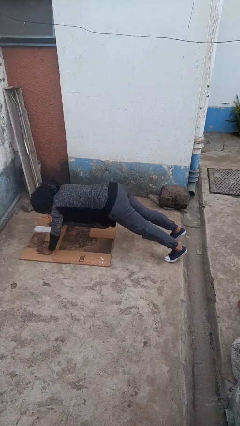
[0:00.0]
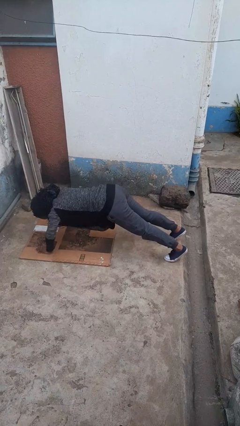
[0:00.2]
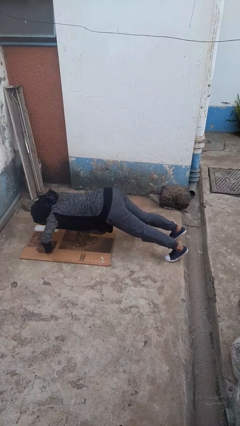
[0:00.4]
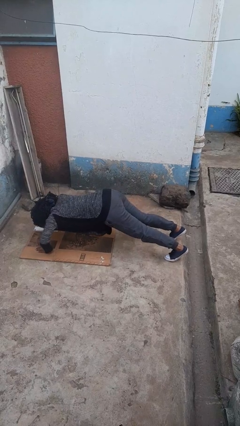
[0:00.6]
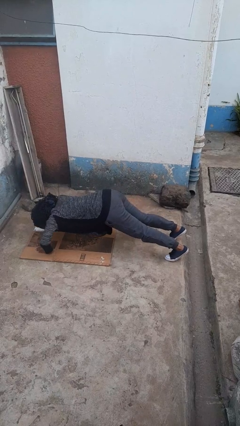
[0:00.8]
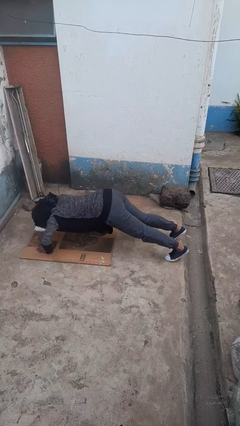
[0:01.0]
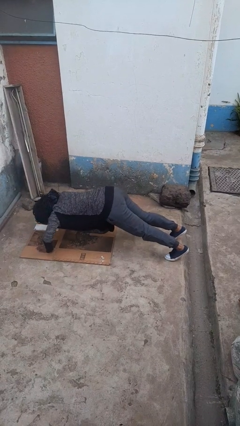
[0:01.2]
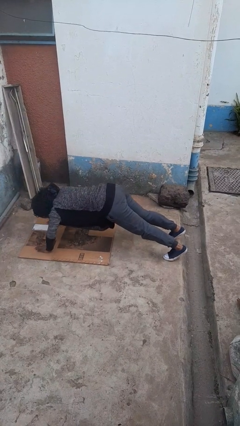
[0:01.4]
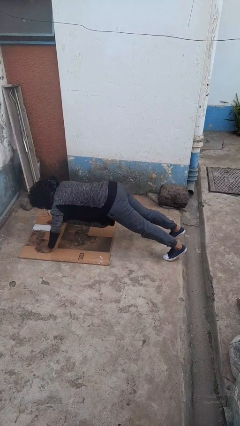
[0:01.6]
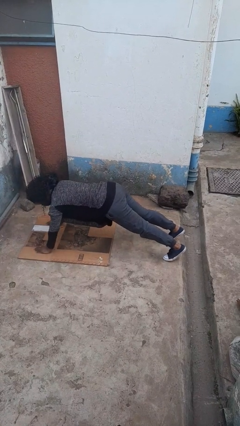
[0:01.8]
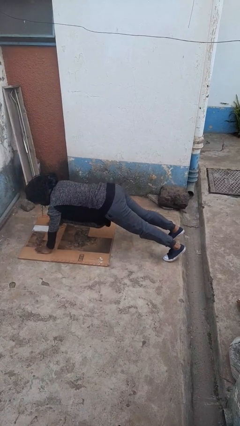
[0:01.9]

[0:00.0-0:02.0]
person exercises with pushup

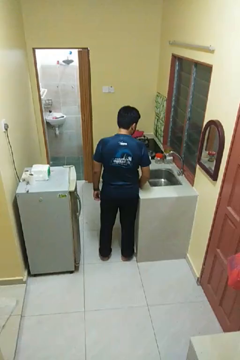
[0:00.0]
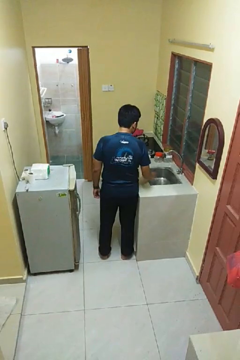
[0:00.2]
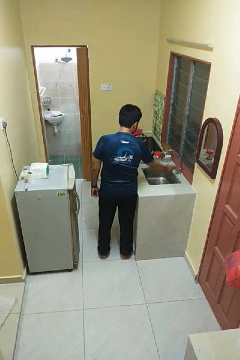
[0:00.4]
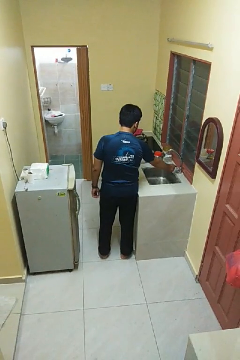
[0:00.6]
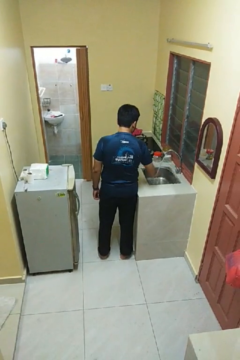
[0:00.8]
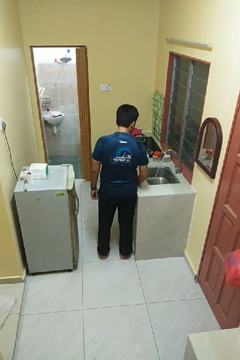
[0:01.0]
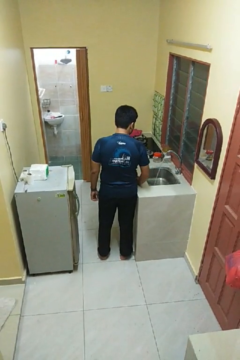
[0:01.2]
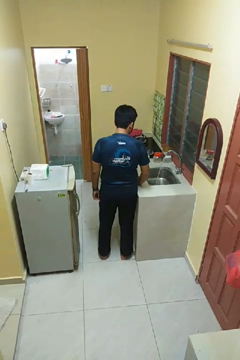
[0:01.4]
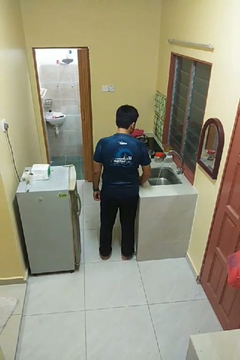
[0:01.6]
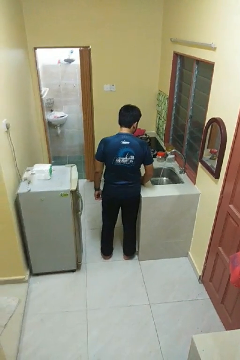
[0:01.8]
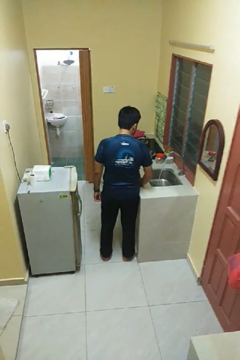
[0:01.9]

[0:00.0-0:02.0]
person turns on faucet

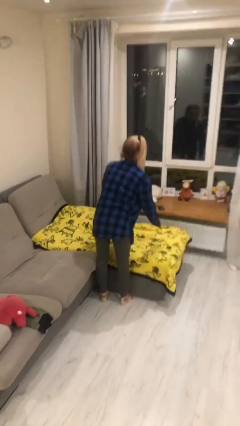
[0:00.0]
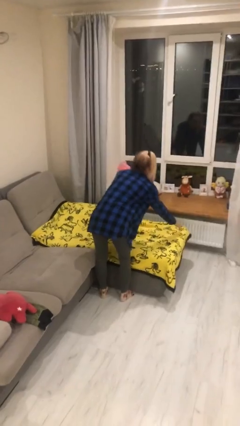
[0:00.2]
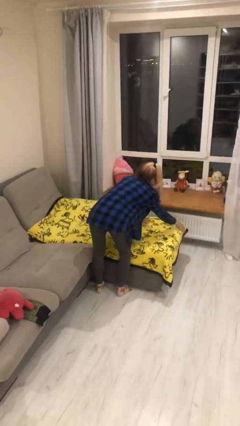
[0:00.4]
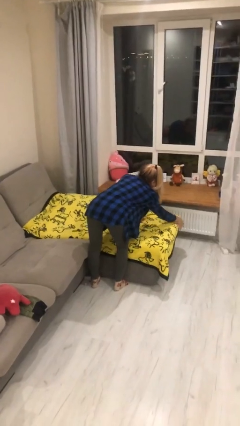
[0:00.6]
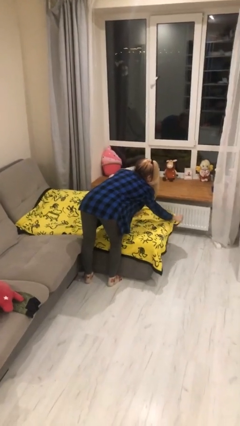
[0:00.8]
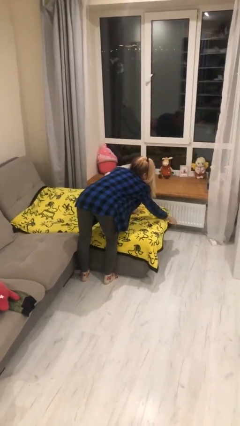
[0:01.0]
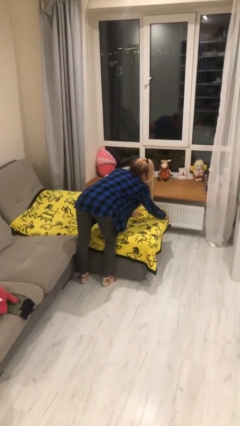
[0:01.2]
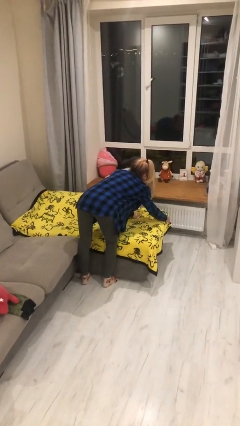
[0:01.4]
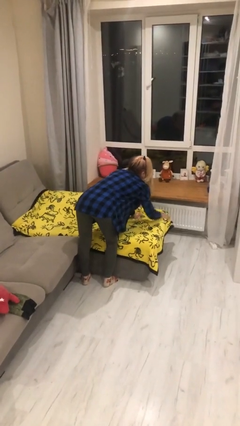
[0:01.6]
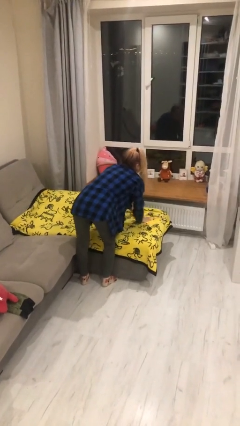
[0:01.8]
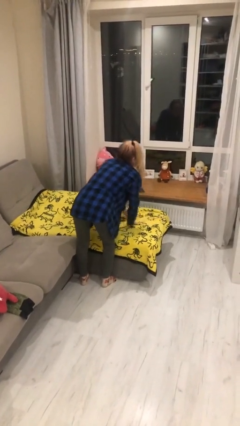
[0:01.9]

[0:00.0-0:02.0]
person makes bed

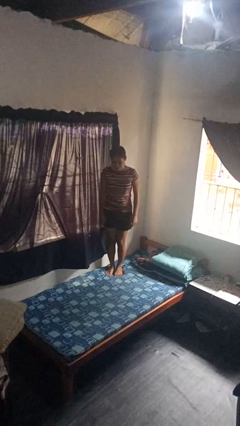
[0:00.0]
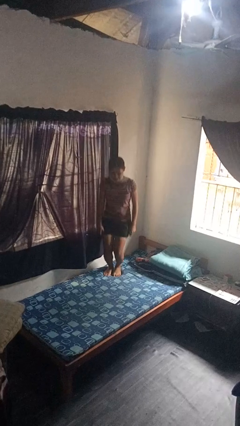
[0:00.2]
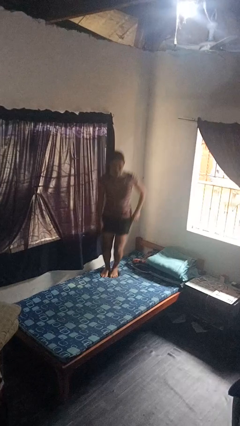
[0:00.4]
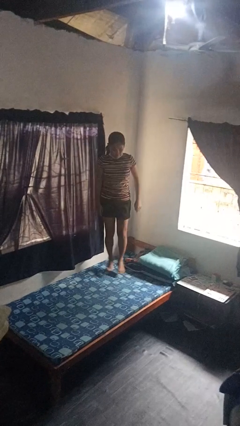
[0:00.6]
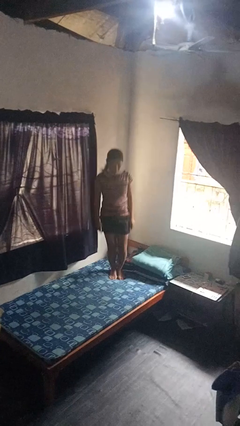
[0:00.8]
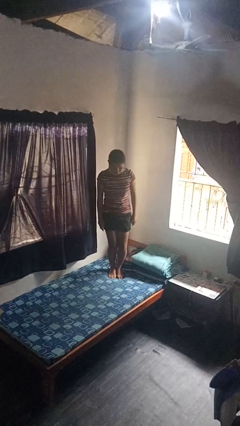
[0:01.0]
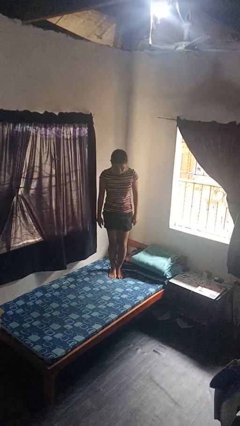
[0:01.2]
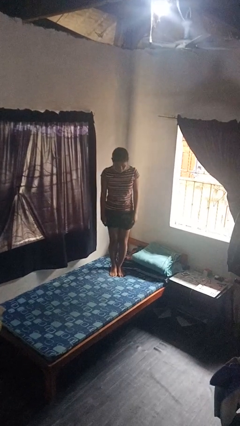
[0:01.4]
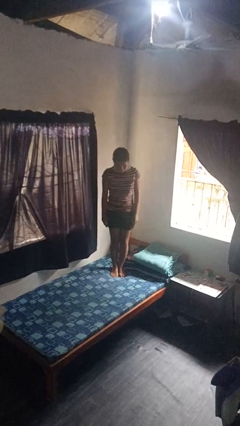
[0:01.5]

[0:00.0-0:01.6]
person jumps on bed

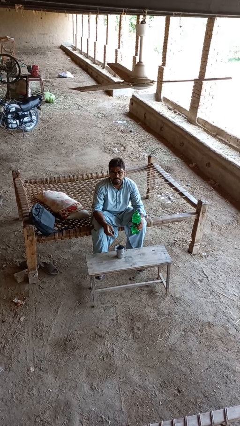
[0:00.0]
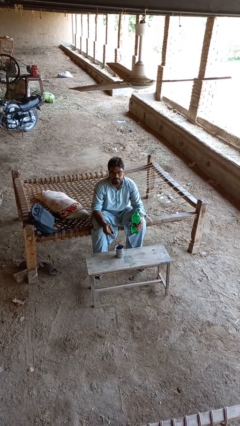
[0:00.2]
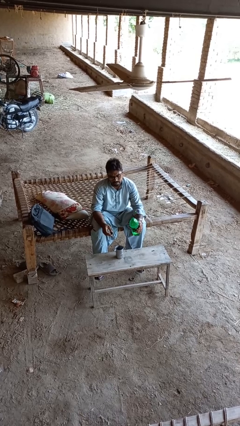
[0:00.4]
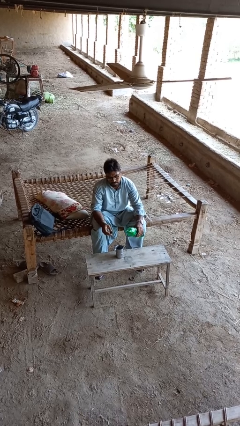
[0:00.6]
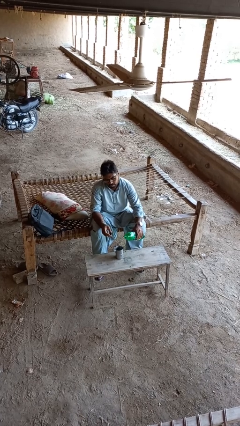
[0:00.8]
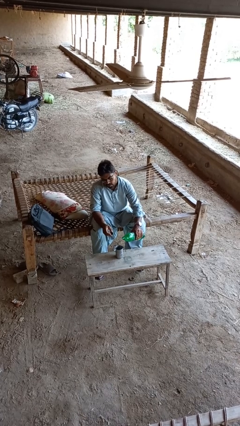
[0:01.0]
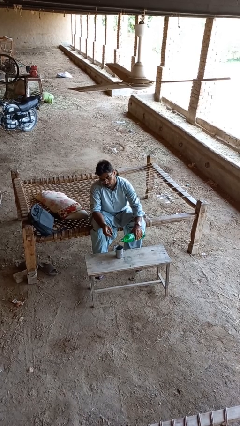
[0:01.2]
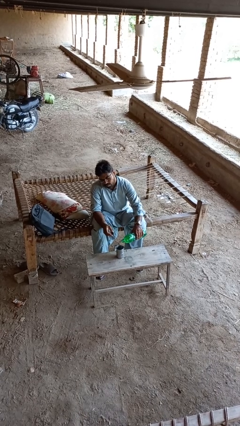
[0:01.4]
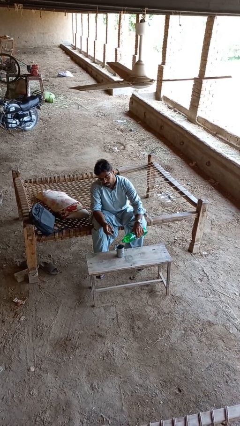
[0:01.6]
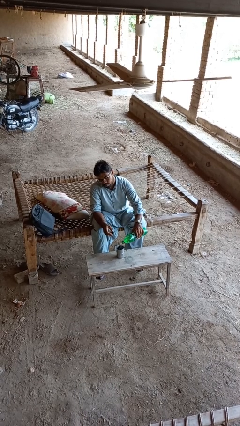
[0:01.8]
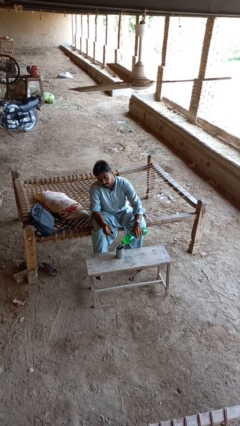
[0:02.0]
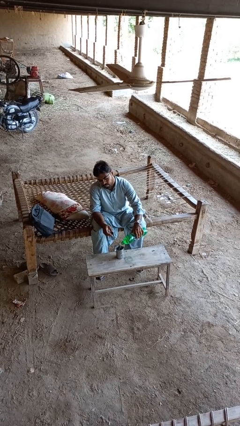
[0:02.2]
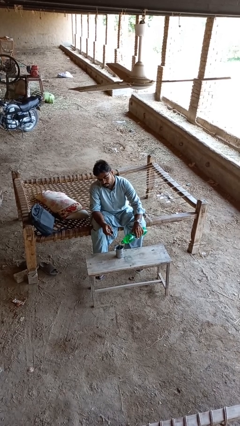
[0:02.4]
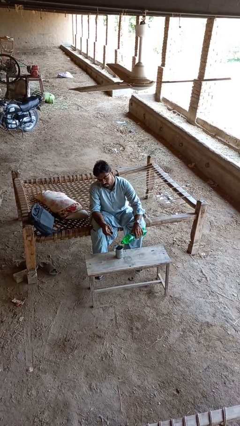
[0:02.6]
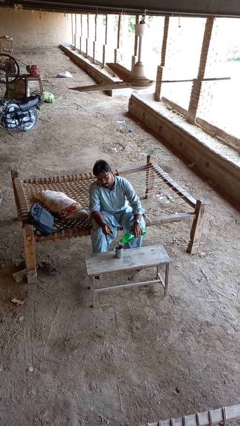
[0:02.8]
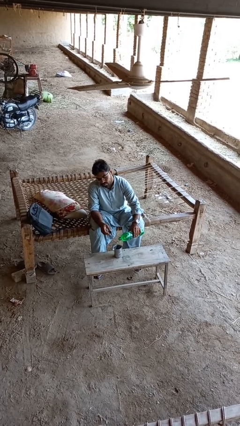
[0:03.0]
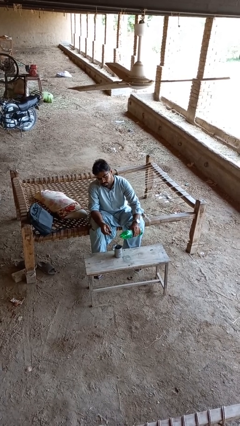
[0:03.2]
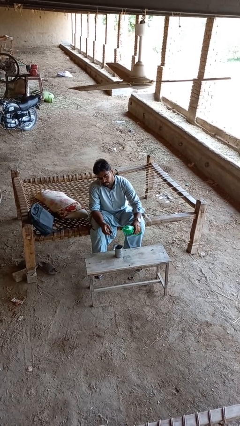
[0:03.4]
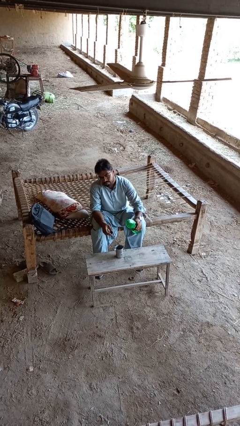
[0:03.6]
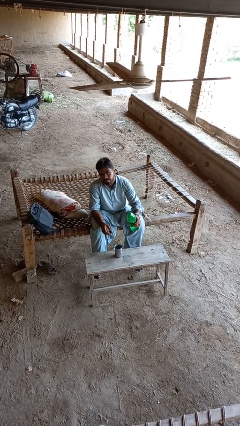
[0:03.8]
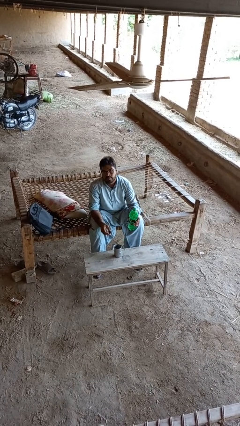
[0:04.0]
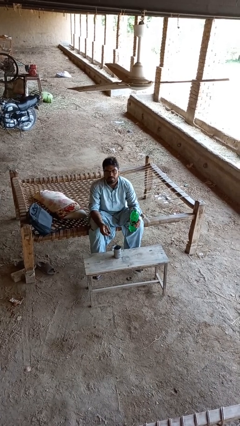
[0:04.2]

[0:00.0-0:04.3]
person pours liquid into cup

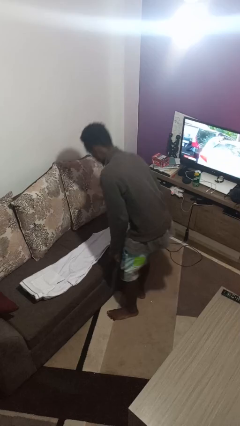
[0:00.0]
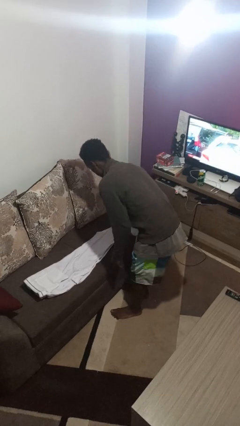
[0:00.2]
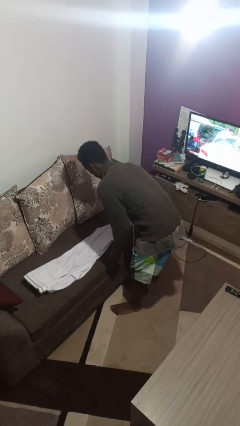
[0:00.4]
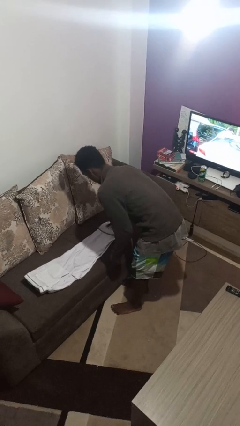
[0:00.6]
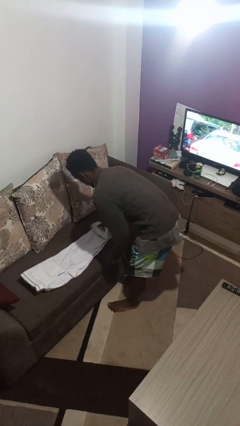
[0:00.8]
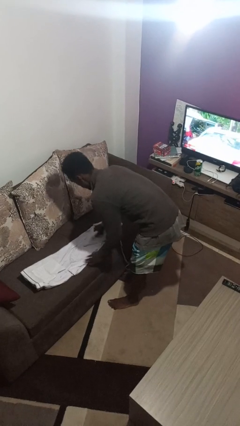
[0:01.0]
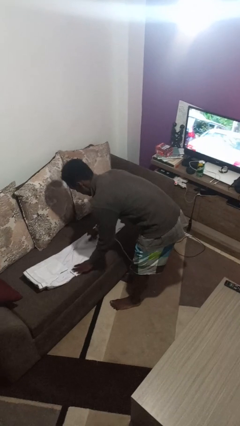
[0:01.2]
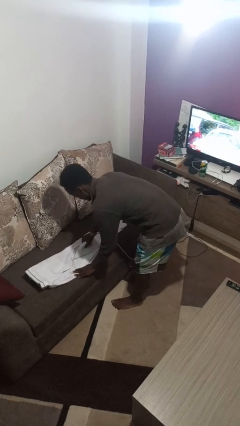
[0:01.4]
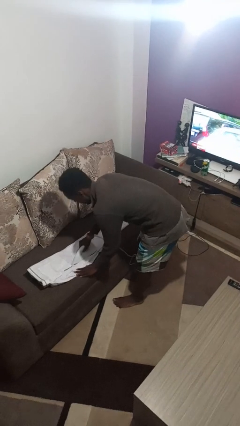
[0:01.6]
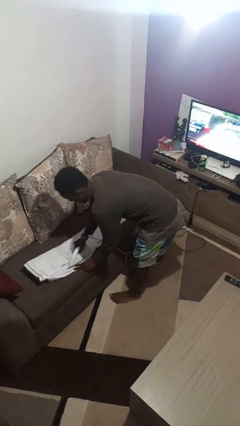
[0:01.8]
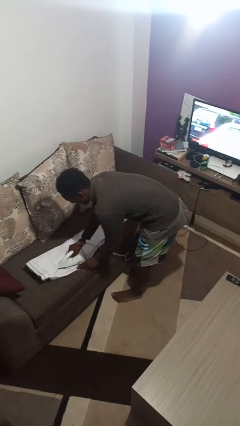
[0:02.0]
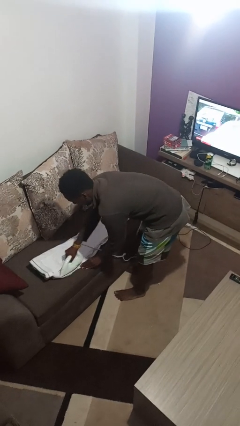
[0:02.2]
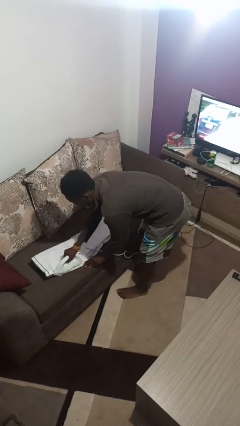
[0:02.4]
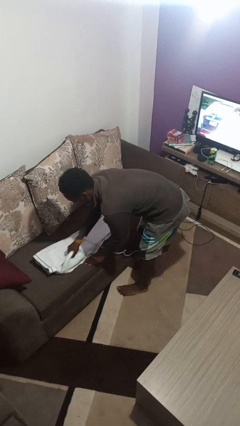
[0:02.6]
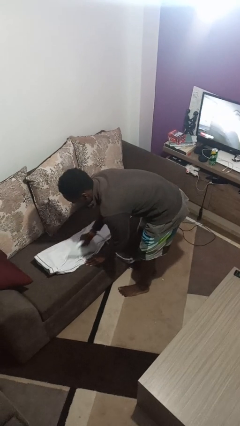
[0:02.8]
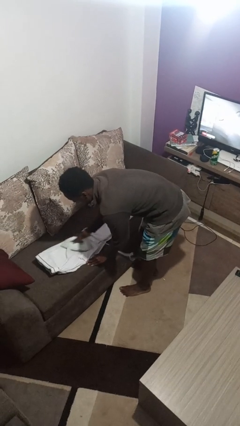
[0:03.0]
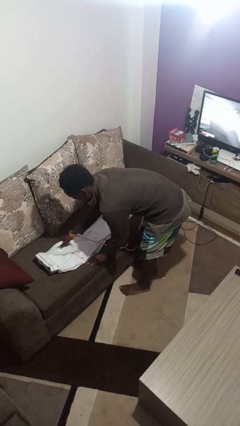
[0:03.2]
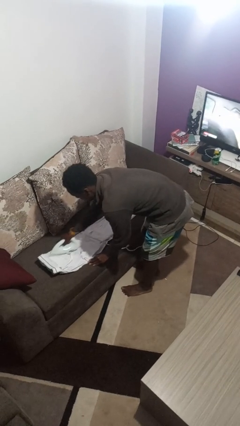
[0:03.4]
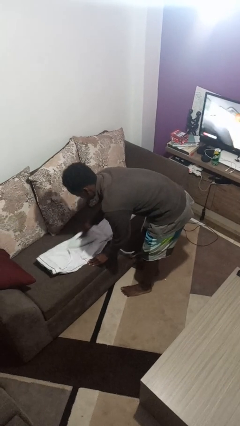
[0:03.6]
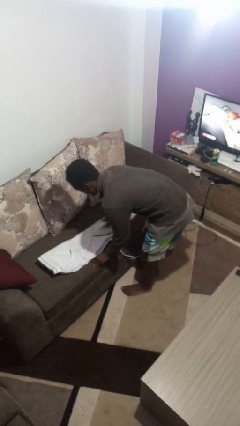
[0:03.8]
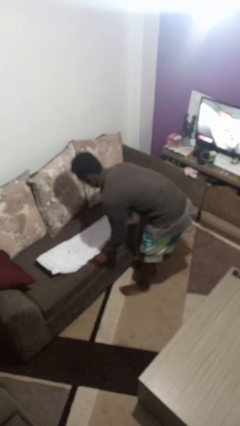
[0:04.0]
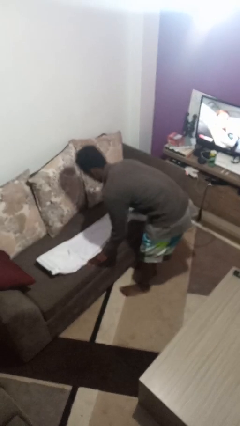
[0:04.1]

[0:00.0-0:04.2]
person irons clothes

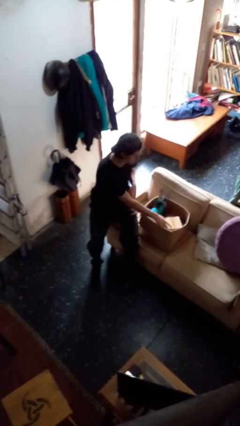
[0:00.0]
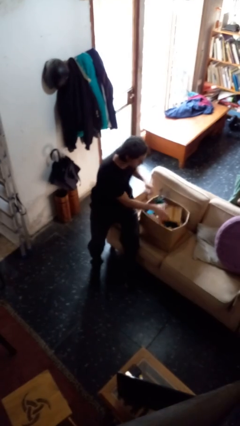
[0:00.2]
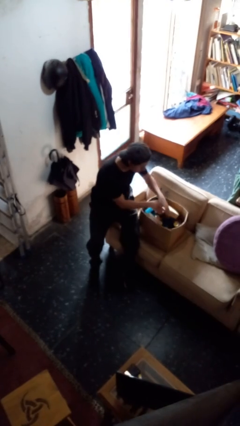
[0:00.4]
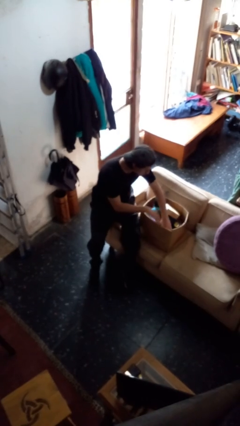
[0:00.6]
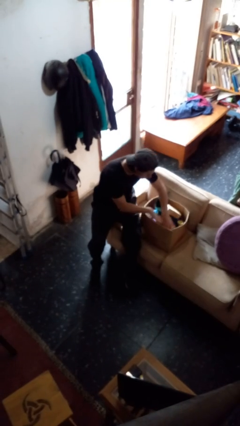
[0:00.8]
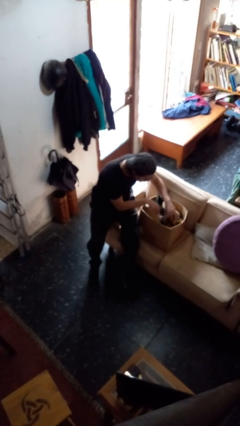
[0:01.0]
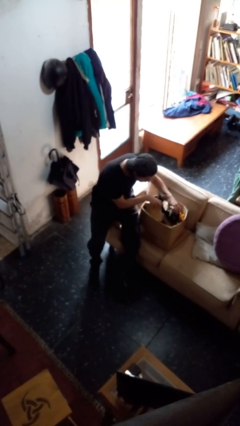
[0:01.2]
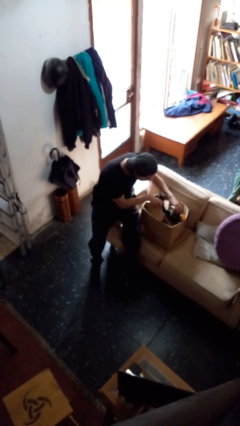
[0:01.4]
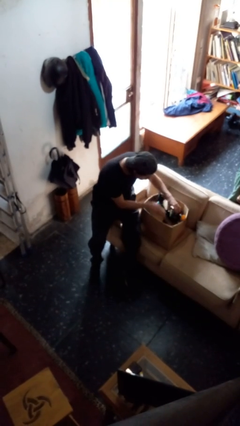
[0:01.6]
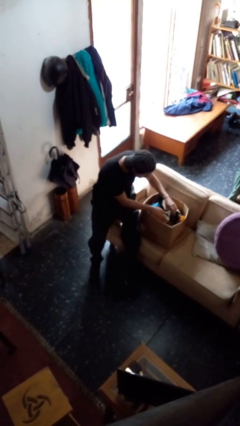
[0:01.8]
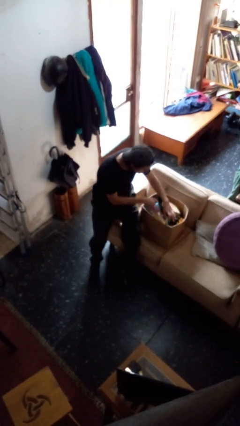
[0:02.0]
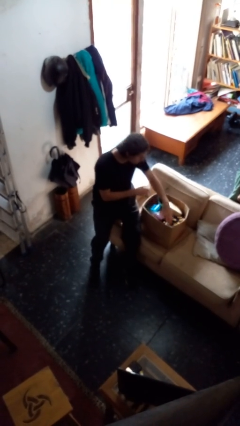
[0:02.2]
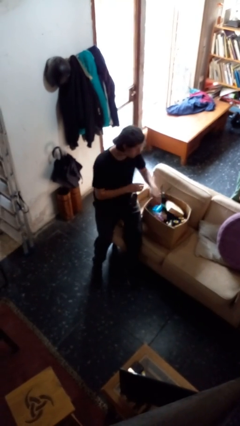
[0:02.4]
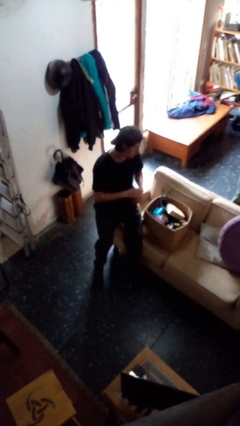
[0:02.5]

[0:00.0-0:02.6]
person searches in box
